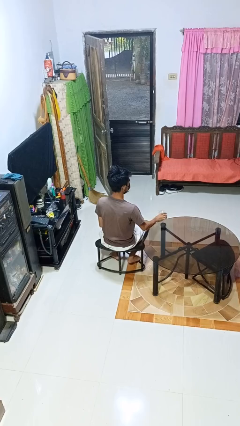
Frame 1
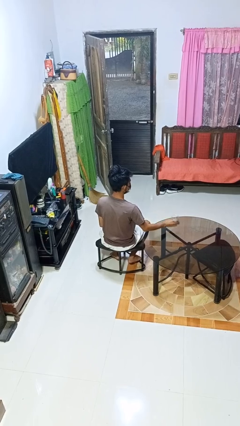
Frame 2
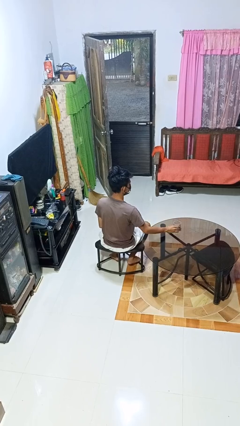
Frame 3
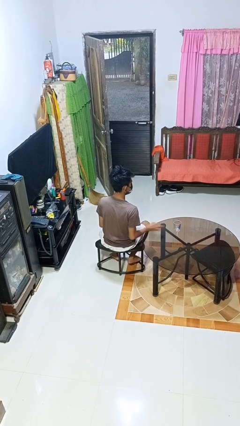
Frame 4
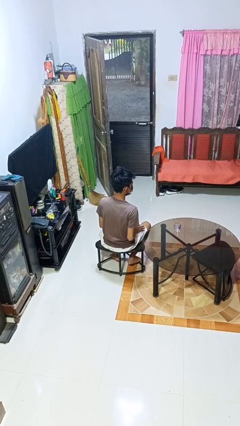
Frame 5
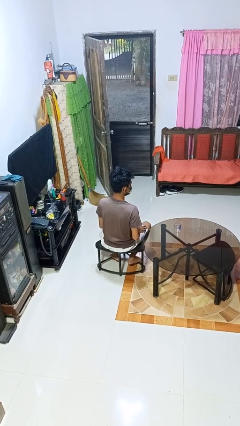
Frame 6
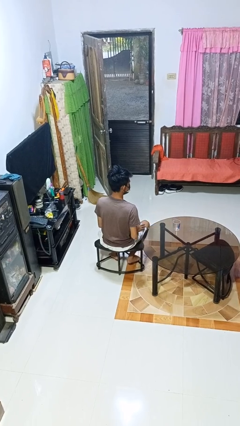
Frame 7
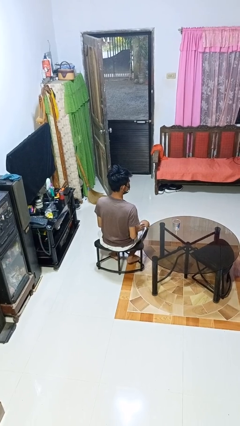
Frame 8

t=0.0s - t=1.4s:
person sets upright glass

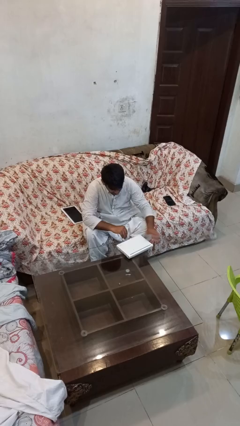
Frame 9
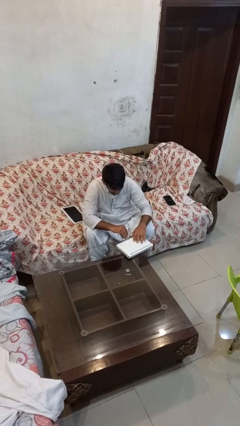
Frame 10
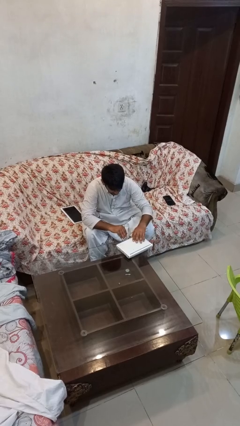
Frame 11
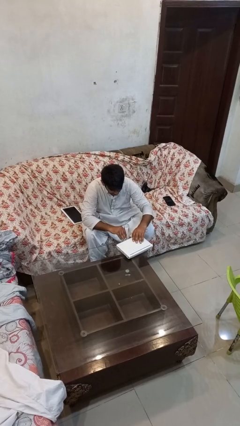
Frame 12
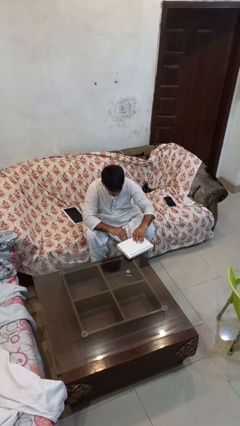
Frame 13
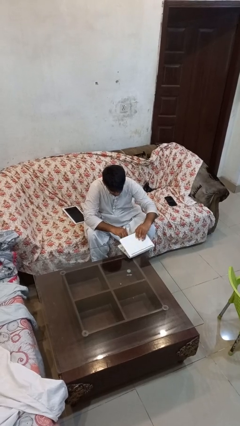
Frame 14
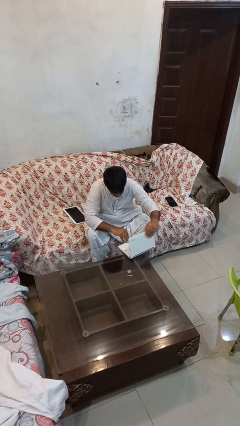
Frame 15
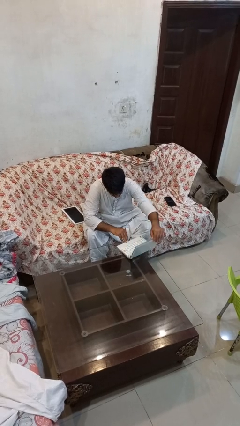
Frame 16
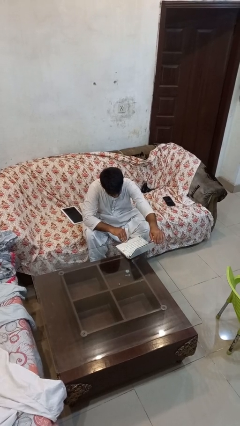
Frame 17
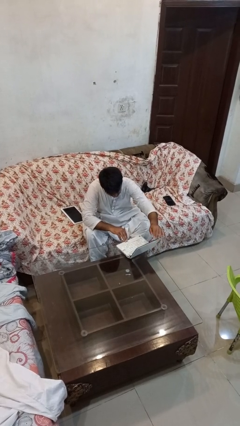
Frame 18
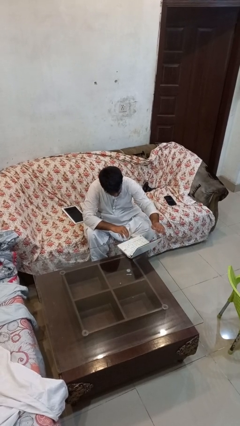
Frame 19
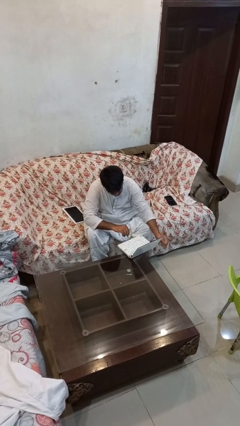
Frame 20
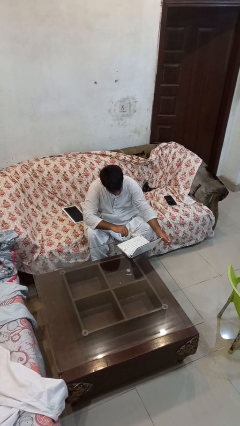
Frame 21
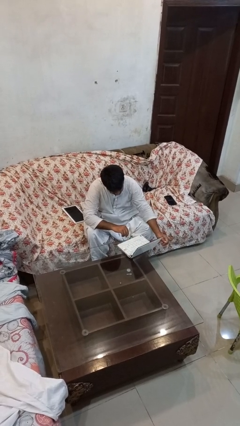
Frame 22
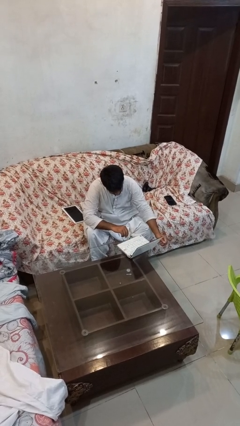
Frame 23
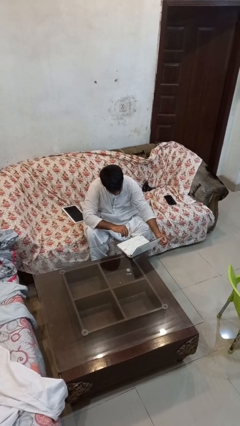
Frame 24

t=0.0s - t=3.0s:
person opens laptop

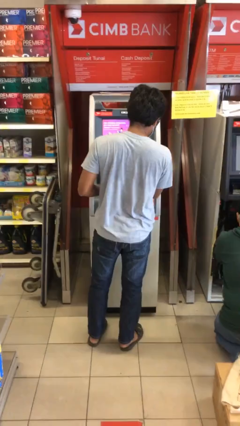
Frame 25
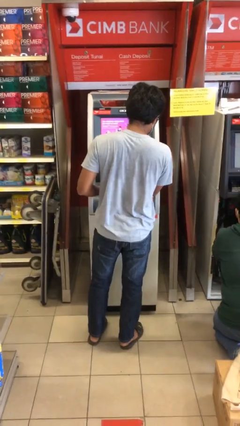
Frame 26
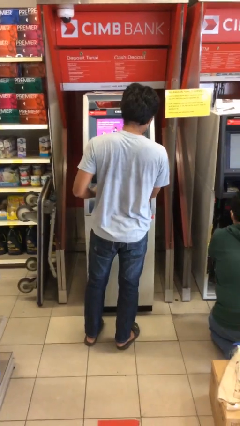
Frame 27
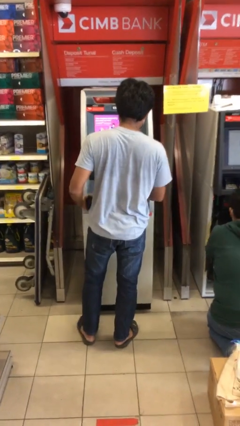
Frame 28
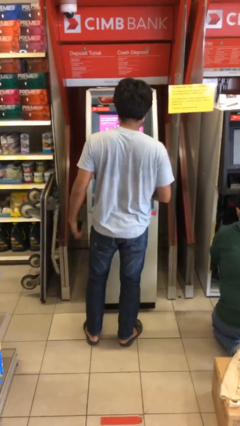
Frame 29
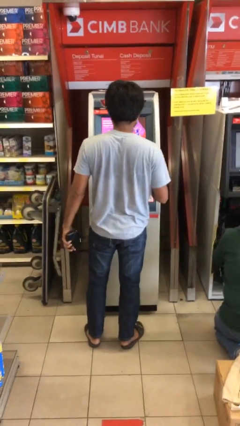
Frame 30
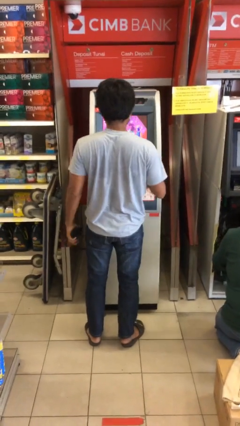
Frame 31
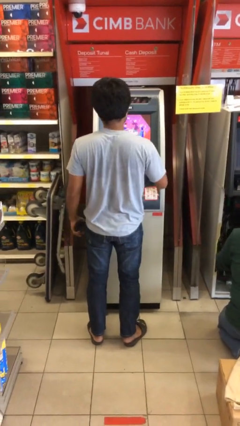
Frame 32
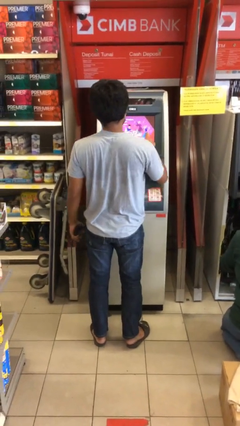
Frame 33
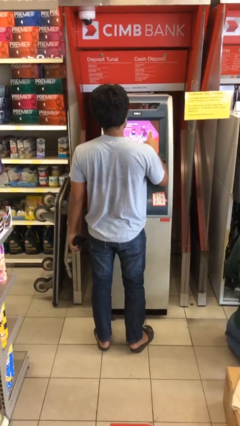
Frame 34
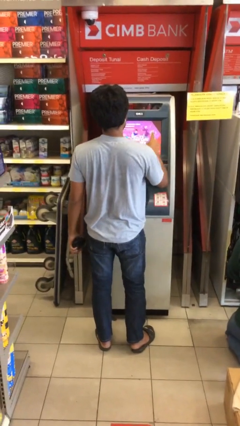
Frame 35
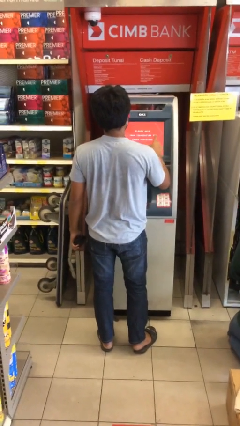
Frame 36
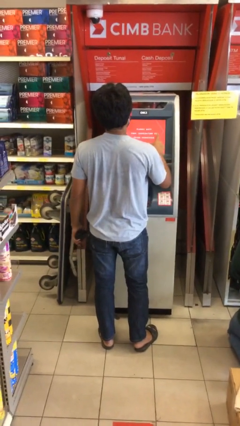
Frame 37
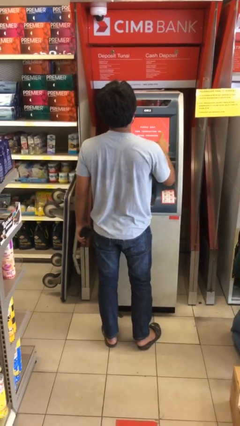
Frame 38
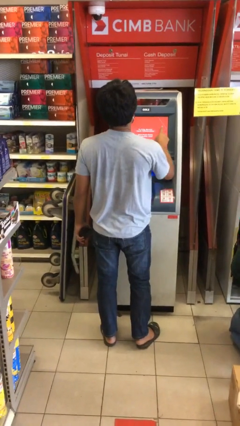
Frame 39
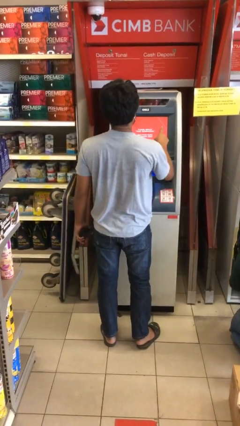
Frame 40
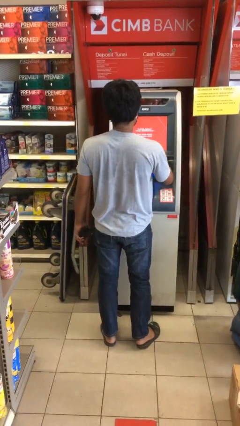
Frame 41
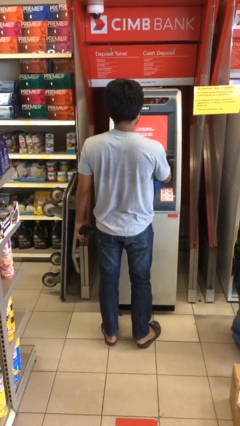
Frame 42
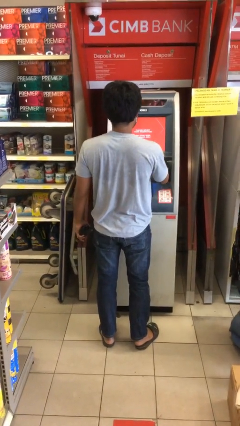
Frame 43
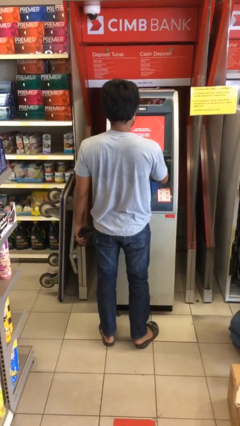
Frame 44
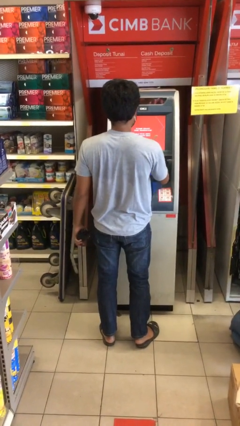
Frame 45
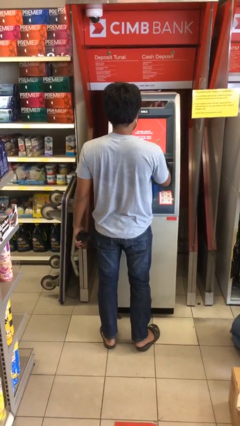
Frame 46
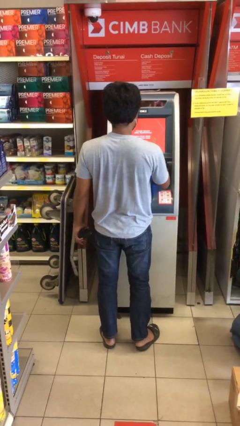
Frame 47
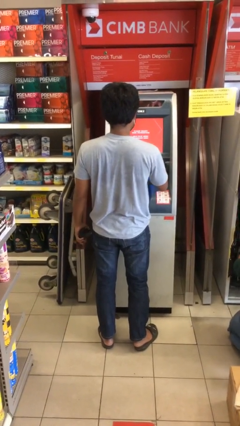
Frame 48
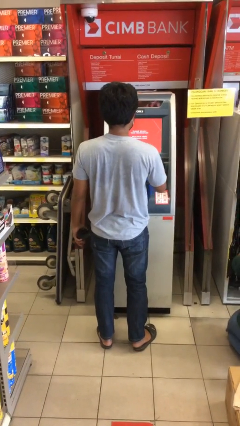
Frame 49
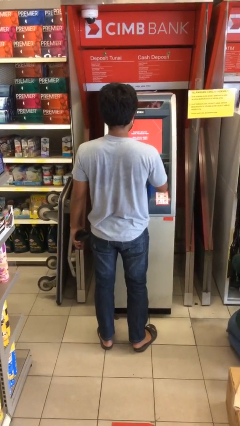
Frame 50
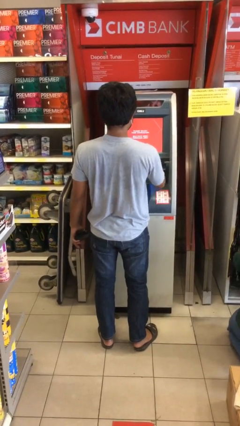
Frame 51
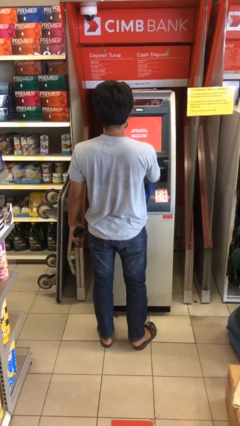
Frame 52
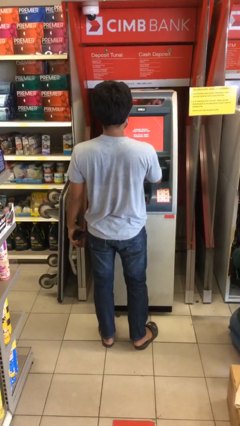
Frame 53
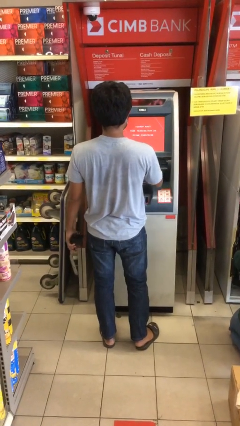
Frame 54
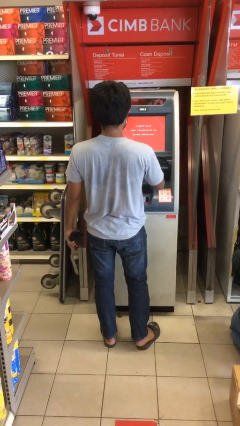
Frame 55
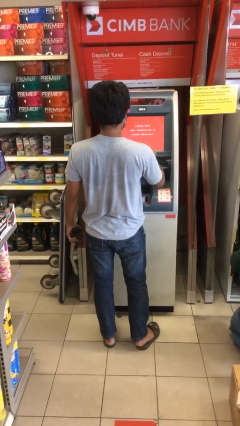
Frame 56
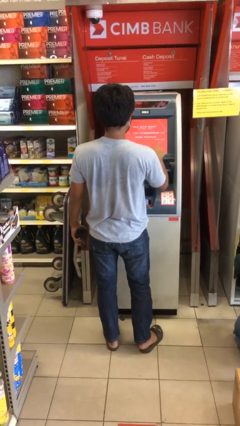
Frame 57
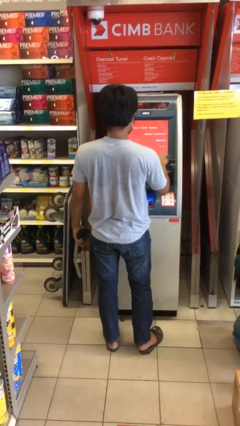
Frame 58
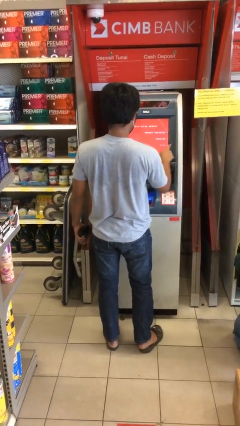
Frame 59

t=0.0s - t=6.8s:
person purchases from machine

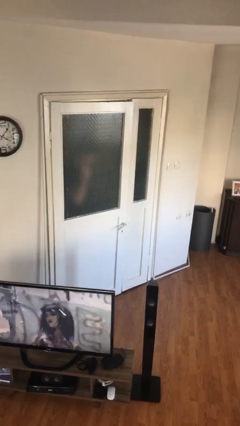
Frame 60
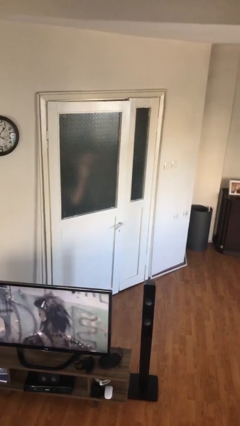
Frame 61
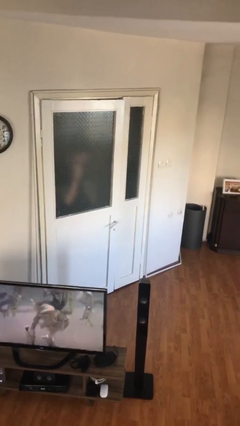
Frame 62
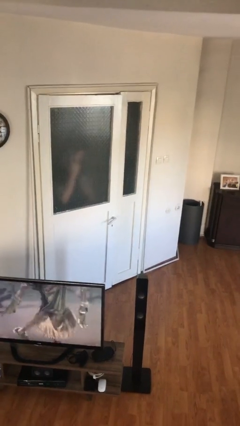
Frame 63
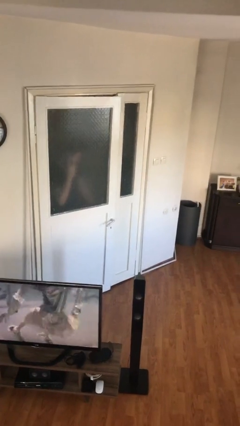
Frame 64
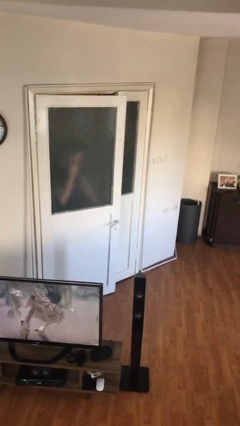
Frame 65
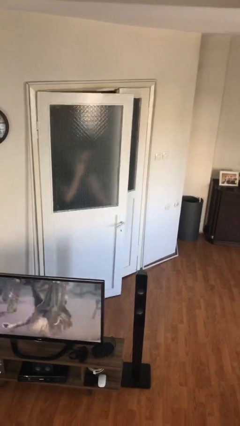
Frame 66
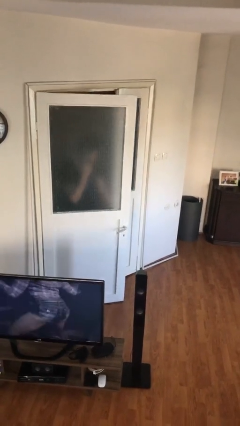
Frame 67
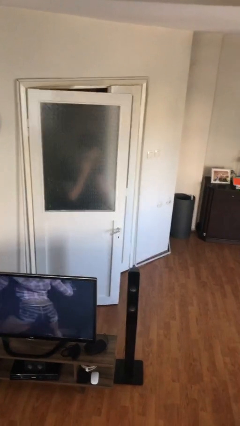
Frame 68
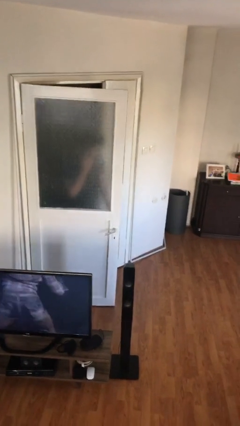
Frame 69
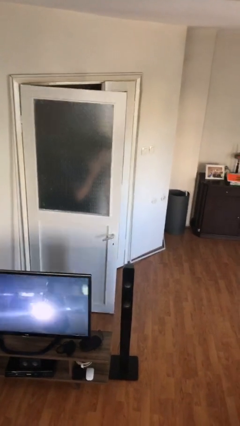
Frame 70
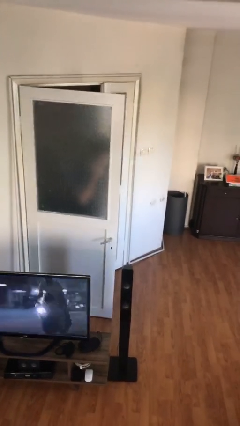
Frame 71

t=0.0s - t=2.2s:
person opens facility door

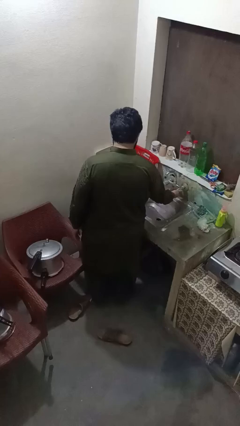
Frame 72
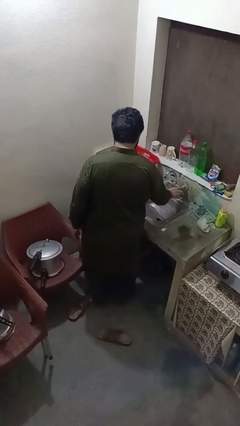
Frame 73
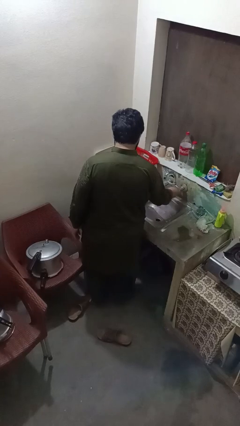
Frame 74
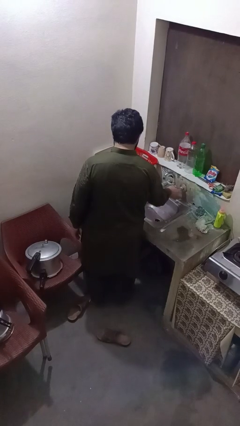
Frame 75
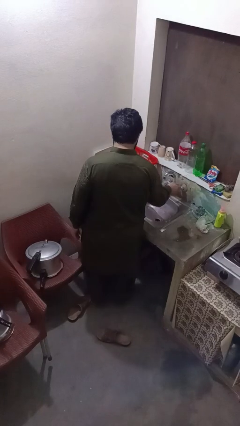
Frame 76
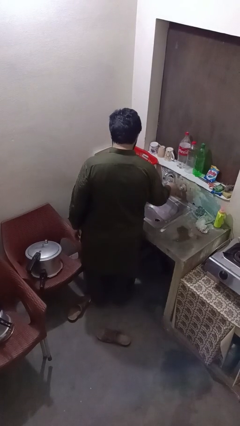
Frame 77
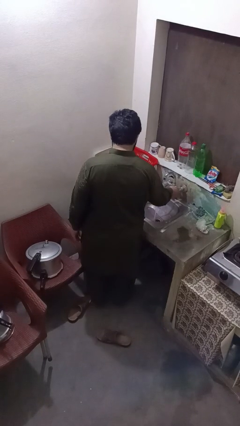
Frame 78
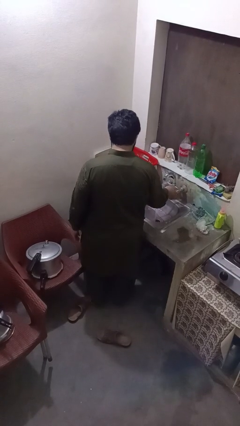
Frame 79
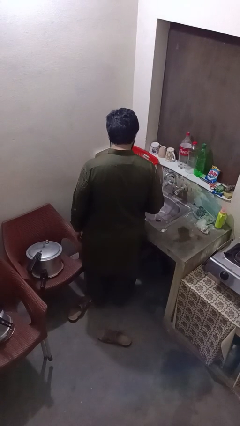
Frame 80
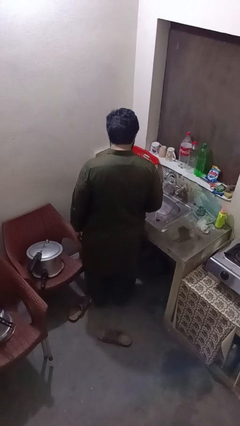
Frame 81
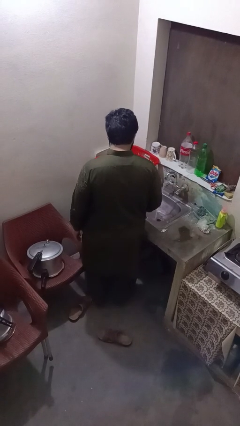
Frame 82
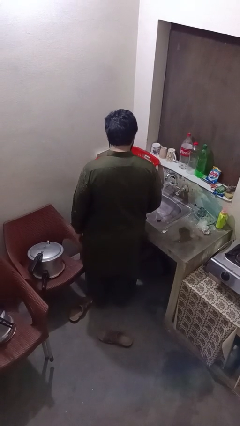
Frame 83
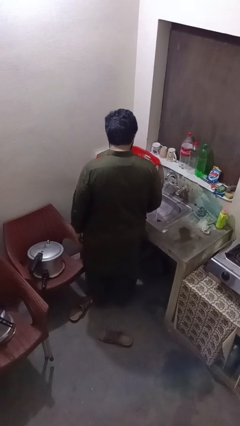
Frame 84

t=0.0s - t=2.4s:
person turns on faucet

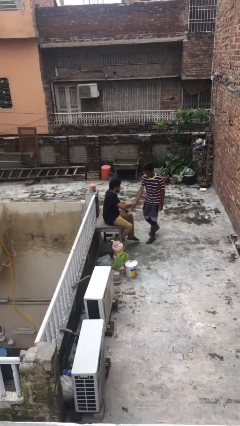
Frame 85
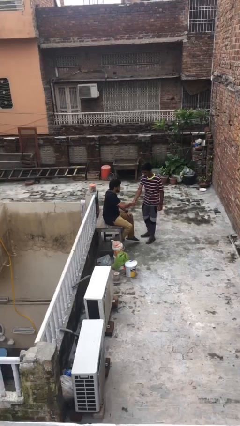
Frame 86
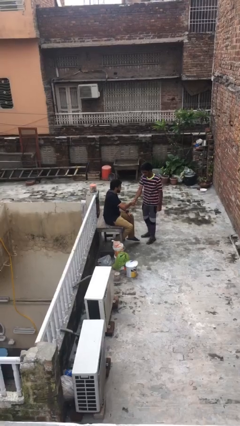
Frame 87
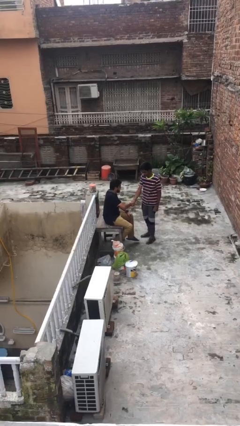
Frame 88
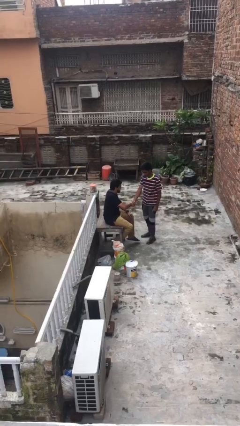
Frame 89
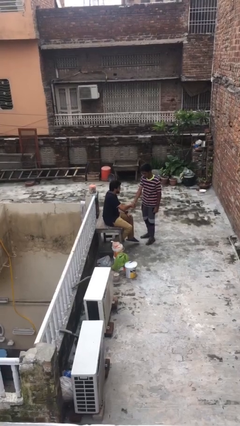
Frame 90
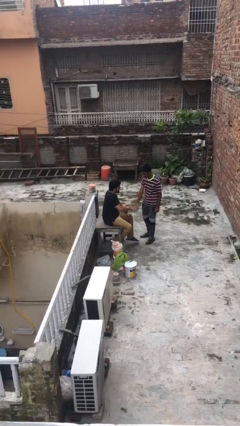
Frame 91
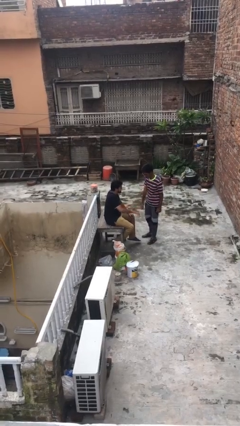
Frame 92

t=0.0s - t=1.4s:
person shakes hand

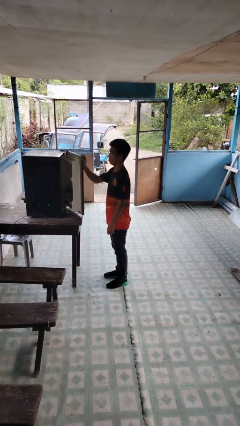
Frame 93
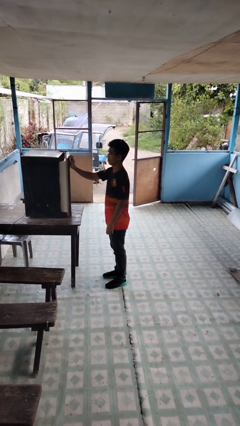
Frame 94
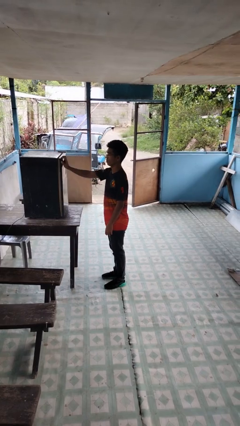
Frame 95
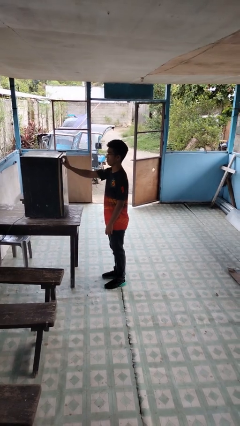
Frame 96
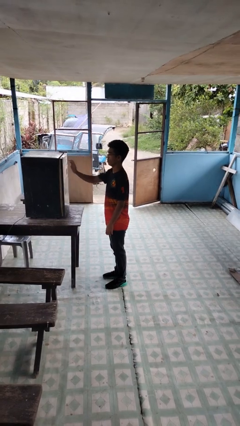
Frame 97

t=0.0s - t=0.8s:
person closes refrigerator
